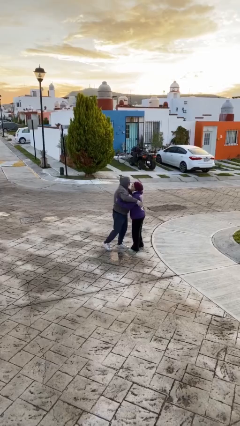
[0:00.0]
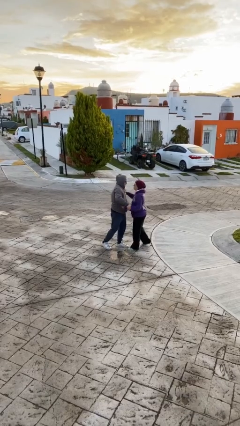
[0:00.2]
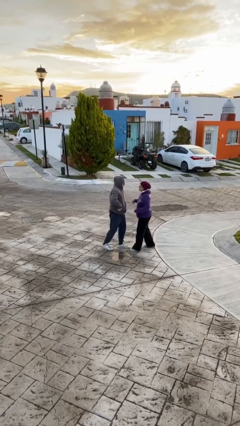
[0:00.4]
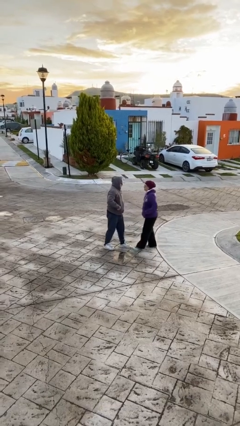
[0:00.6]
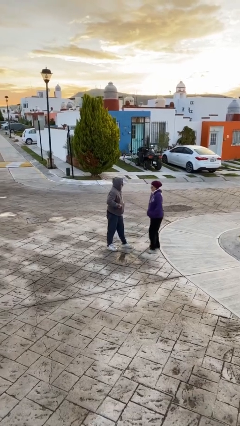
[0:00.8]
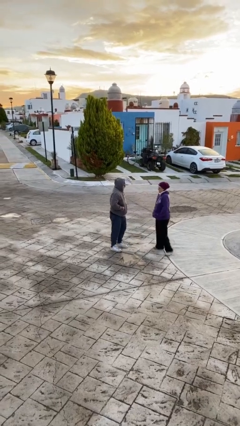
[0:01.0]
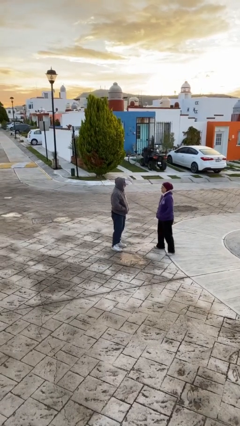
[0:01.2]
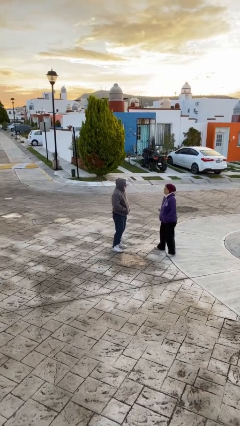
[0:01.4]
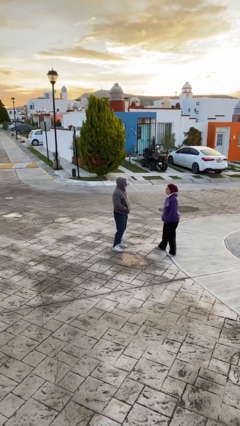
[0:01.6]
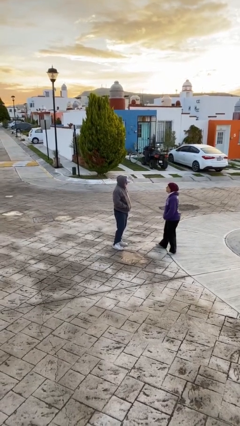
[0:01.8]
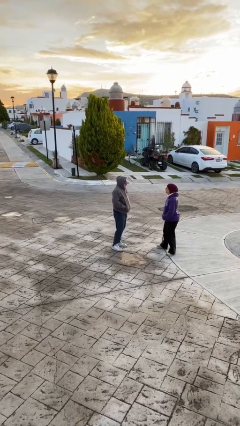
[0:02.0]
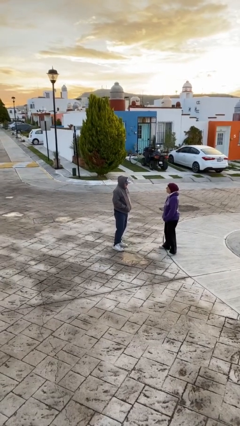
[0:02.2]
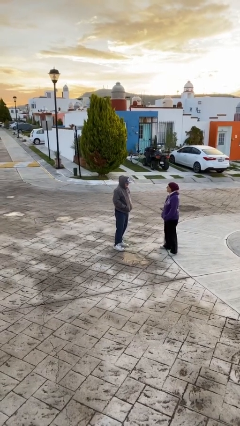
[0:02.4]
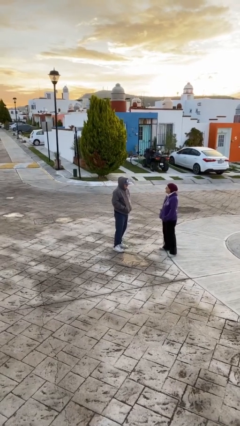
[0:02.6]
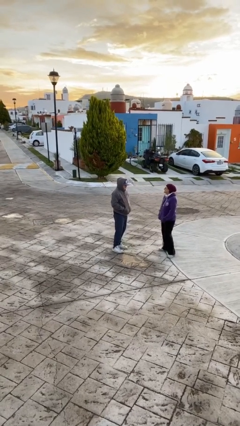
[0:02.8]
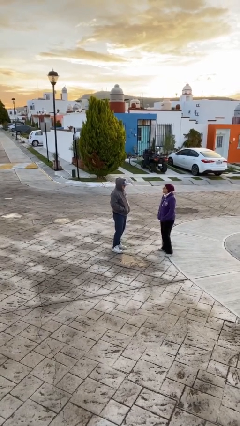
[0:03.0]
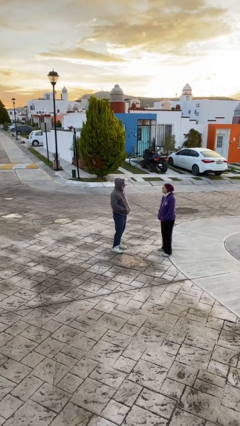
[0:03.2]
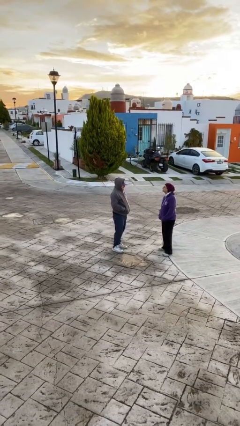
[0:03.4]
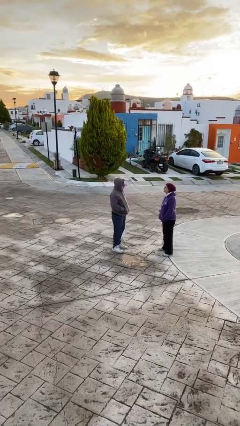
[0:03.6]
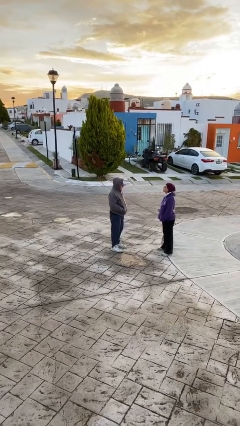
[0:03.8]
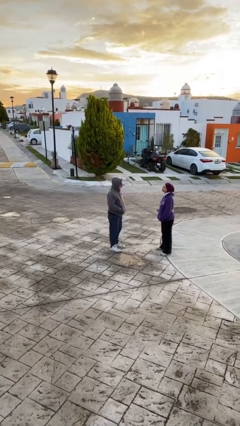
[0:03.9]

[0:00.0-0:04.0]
person talks to person

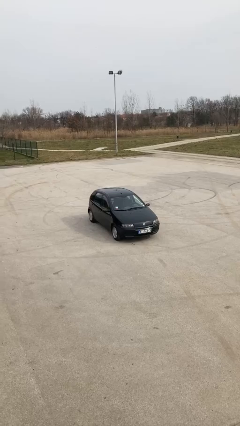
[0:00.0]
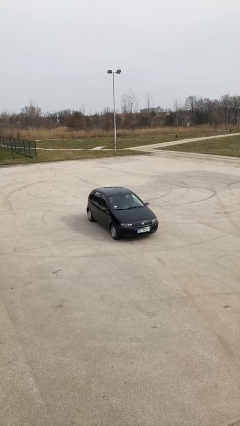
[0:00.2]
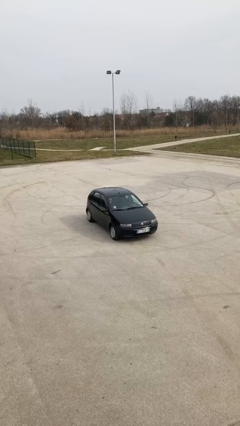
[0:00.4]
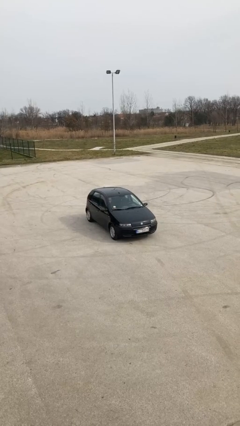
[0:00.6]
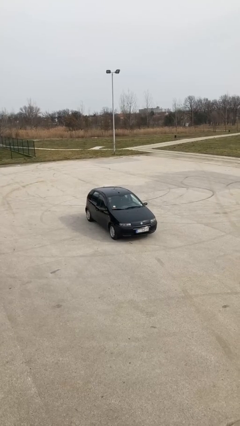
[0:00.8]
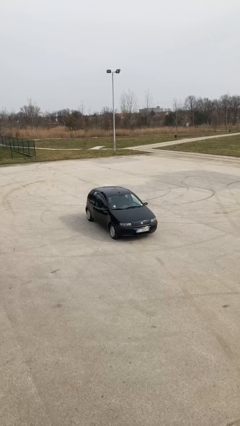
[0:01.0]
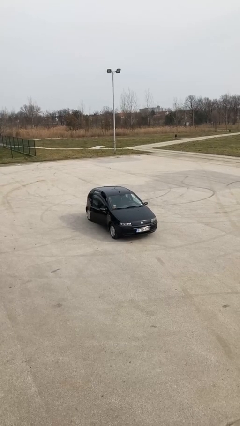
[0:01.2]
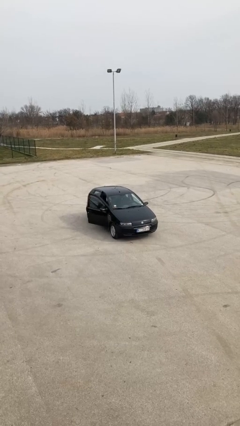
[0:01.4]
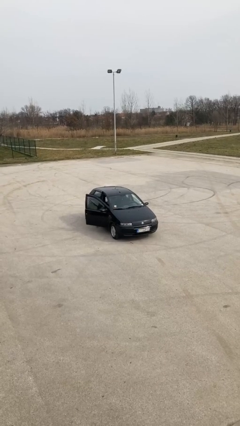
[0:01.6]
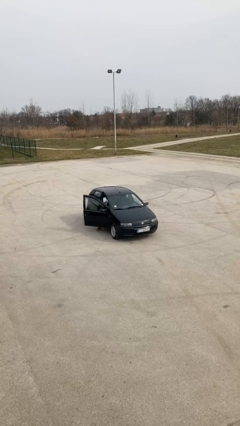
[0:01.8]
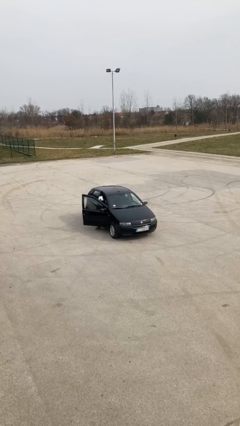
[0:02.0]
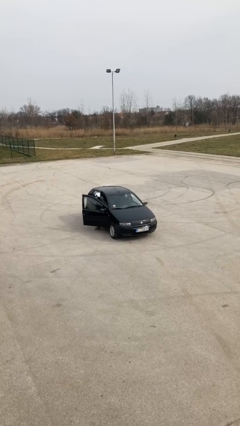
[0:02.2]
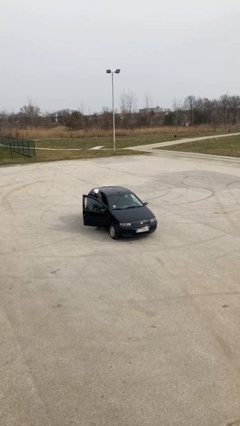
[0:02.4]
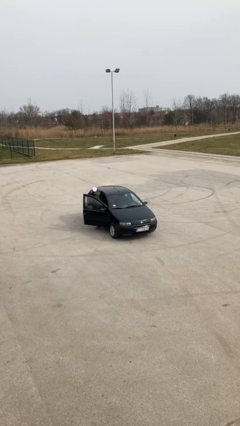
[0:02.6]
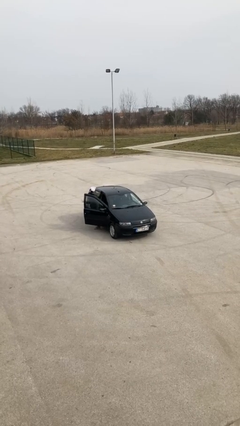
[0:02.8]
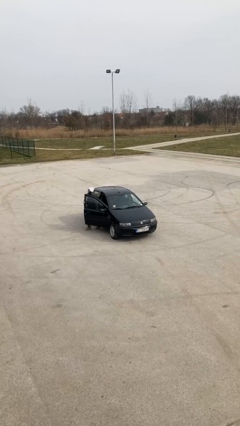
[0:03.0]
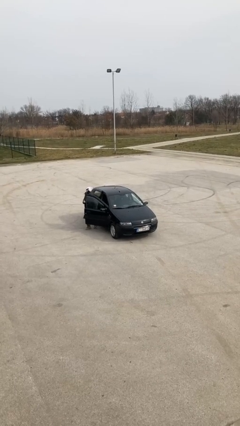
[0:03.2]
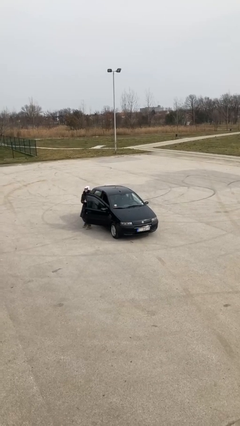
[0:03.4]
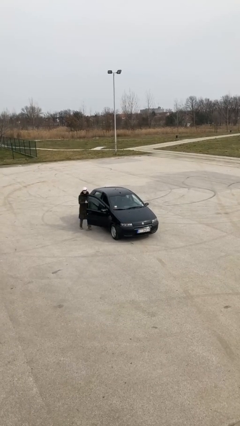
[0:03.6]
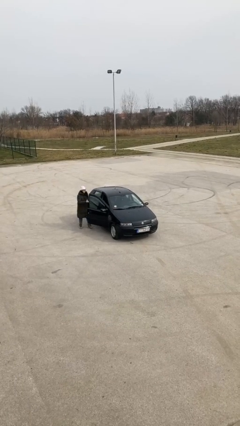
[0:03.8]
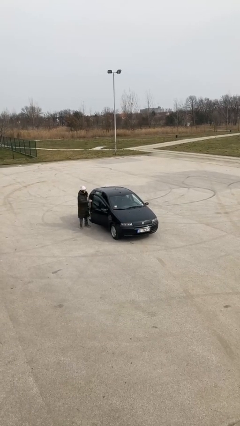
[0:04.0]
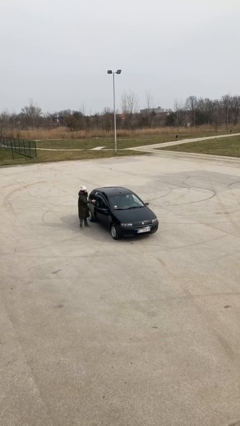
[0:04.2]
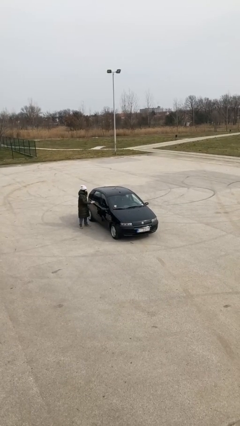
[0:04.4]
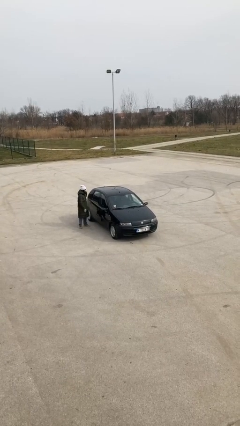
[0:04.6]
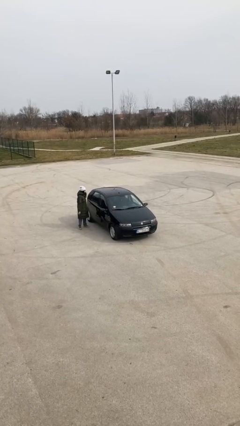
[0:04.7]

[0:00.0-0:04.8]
car drops off person

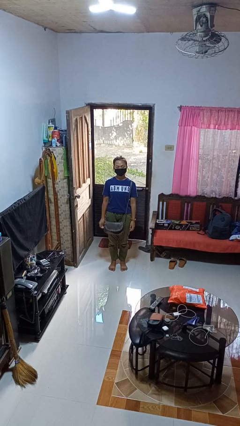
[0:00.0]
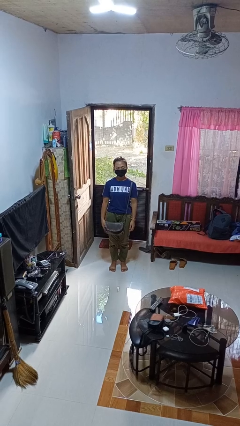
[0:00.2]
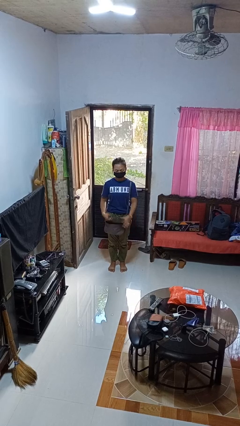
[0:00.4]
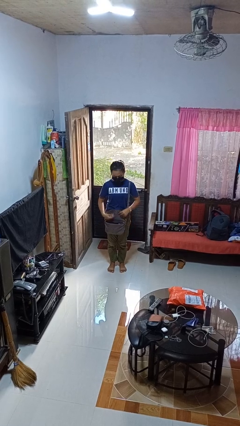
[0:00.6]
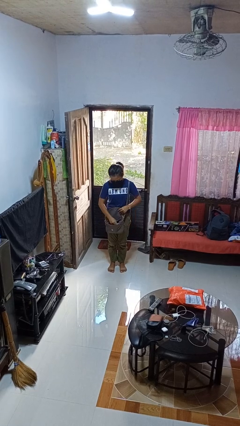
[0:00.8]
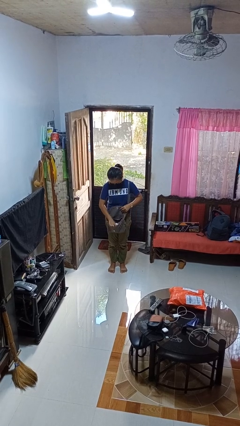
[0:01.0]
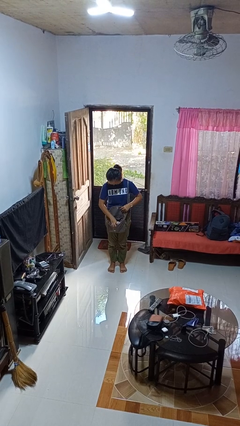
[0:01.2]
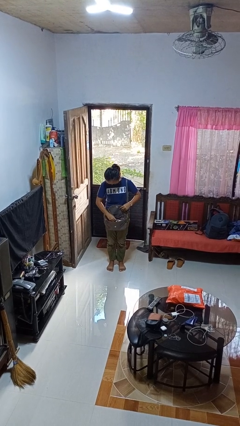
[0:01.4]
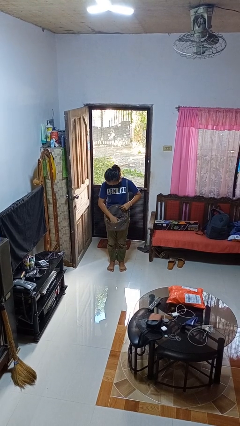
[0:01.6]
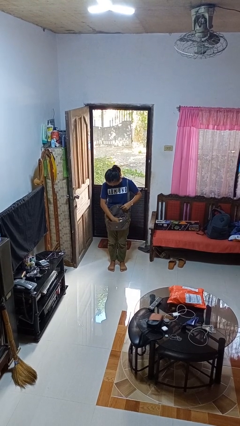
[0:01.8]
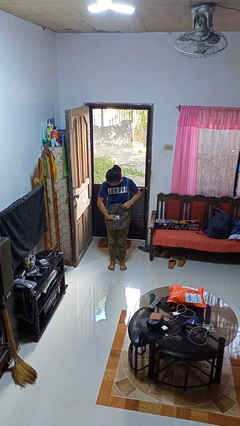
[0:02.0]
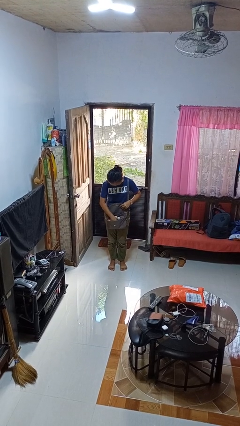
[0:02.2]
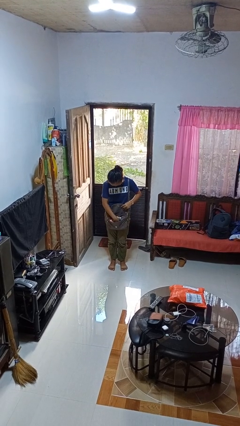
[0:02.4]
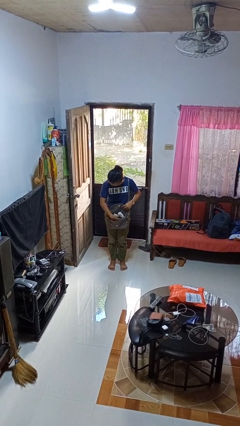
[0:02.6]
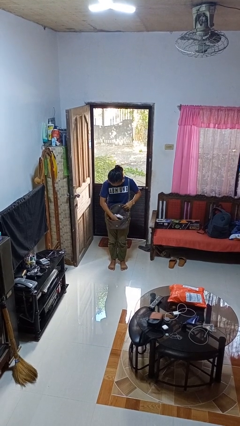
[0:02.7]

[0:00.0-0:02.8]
person searches in purse

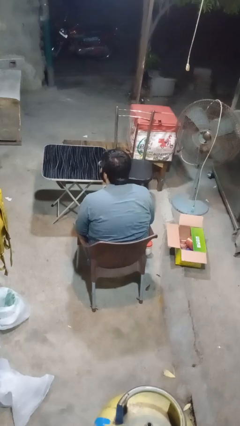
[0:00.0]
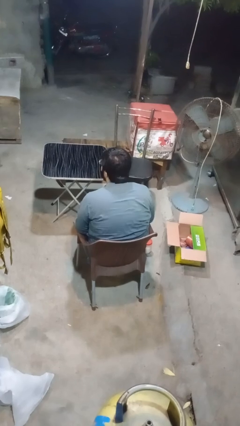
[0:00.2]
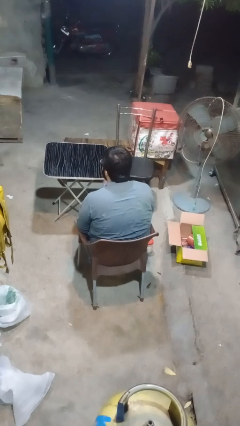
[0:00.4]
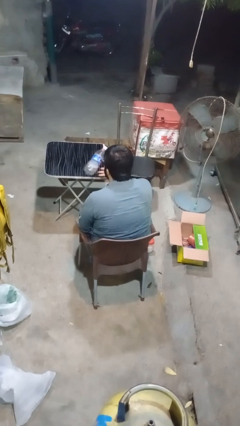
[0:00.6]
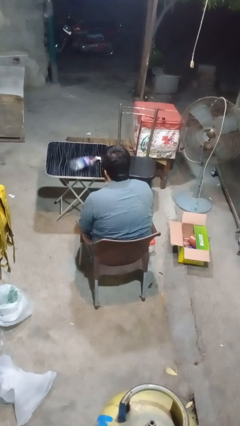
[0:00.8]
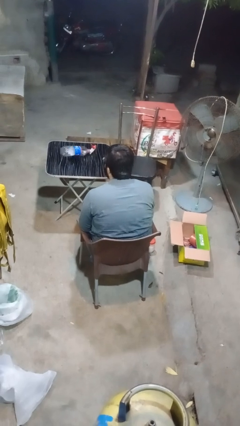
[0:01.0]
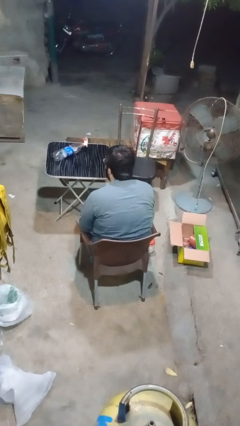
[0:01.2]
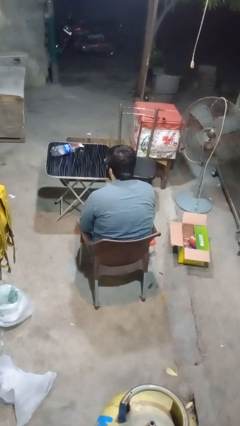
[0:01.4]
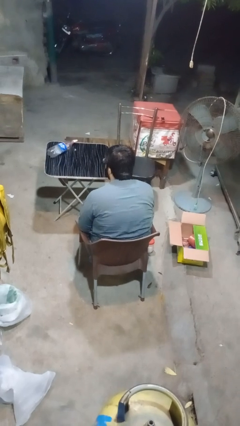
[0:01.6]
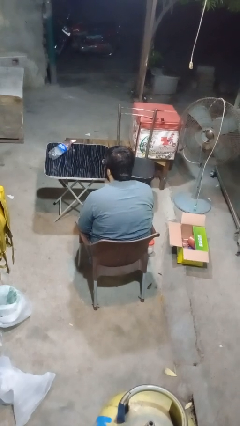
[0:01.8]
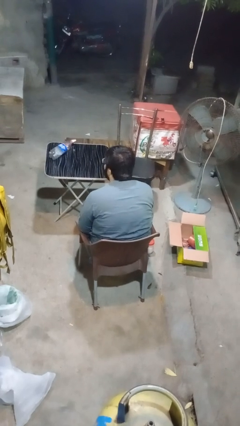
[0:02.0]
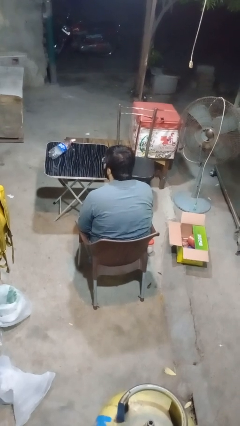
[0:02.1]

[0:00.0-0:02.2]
person throws object on table

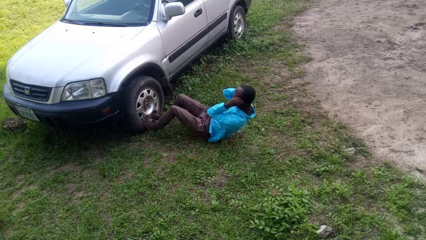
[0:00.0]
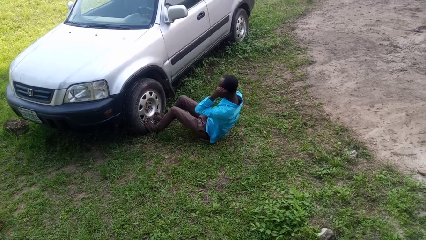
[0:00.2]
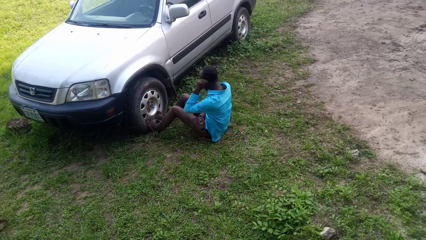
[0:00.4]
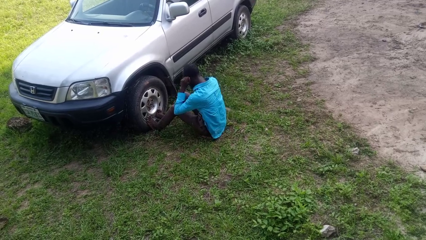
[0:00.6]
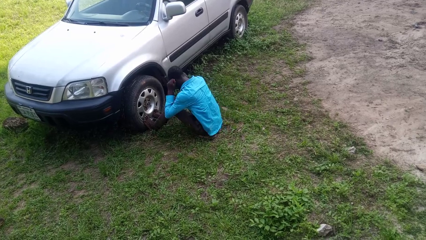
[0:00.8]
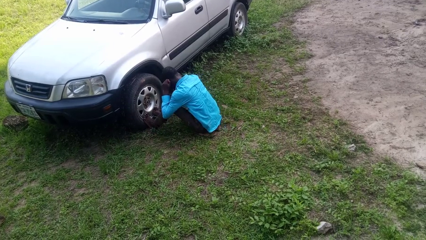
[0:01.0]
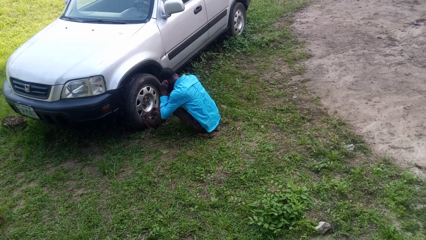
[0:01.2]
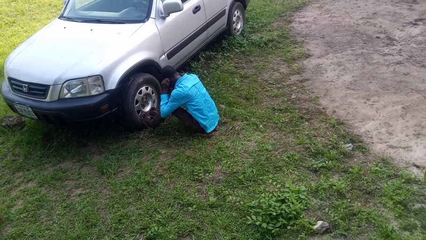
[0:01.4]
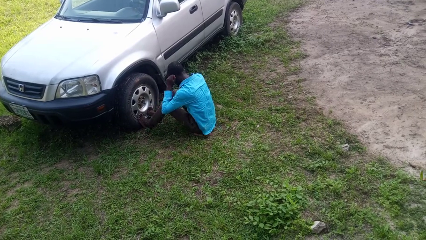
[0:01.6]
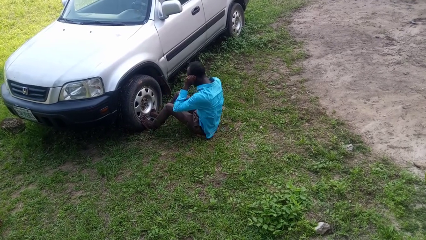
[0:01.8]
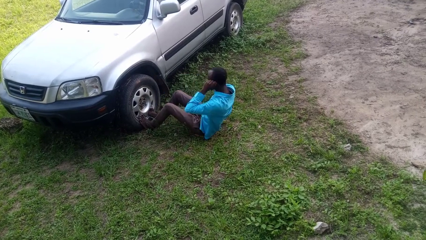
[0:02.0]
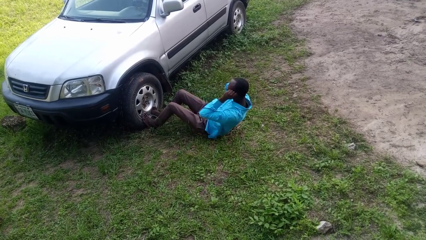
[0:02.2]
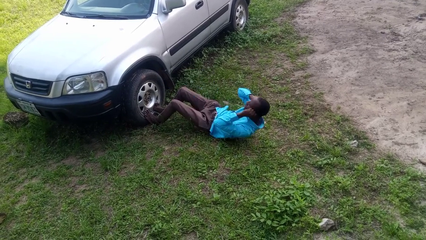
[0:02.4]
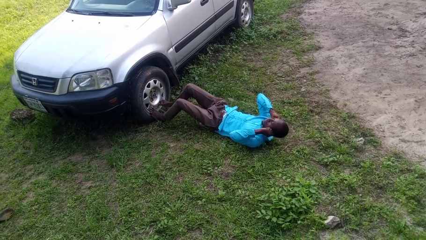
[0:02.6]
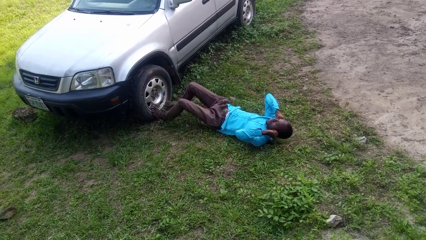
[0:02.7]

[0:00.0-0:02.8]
person exercises with situp

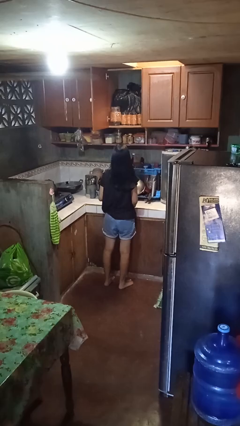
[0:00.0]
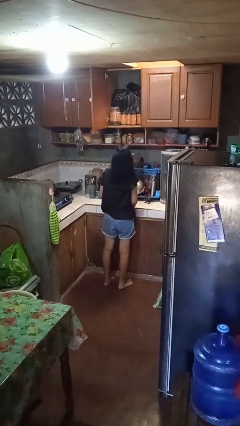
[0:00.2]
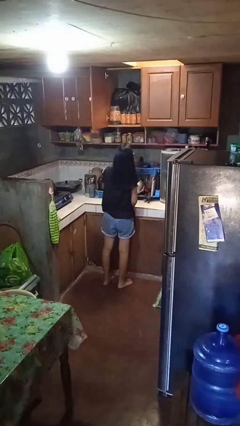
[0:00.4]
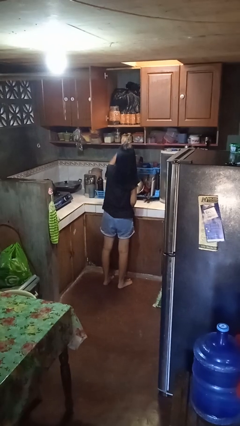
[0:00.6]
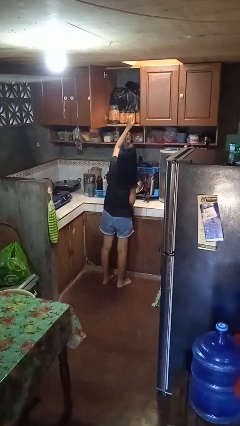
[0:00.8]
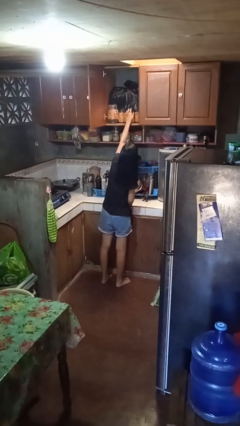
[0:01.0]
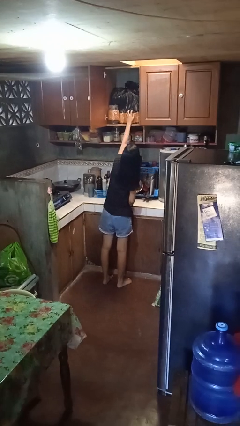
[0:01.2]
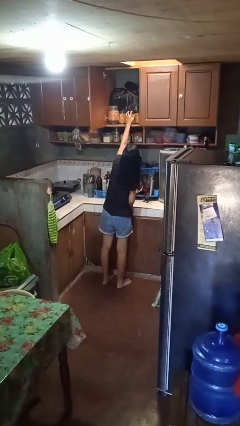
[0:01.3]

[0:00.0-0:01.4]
person picks up object from cabinet
